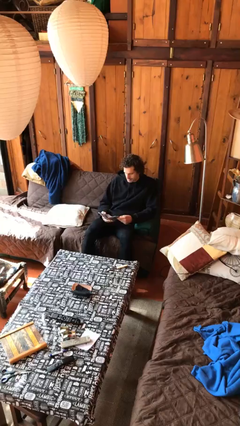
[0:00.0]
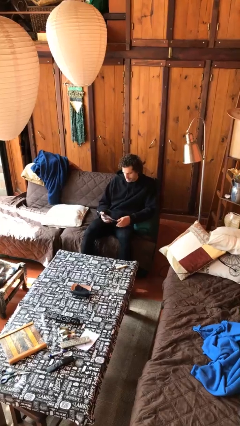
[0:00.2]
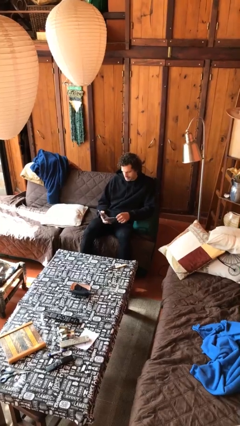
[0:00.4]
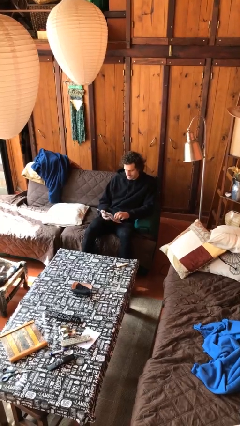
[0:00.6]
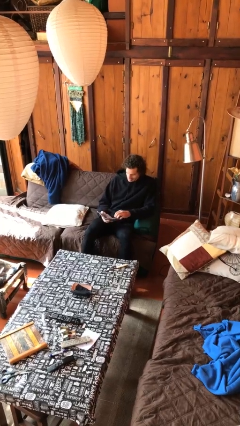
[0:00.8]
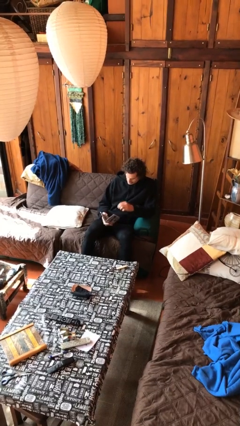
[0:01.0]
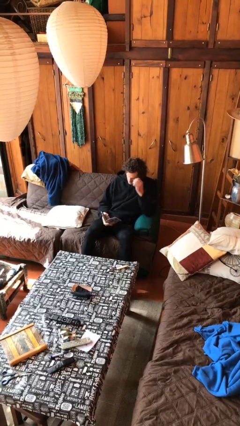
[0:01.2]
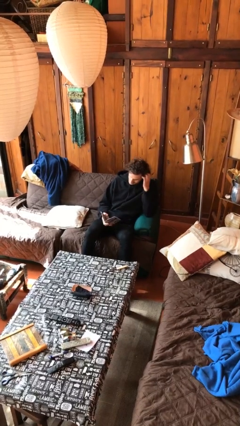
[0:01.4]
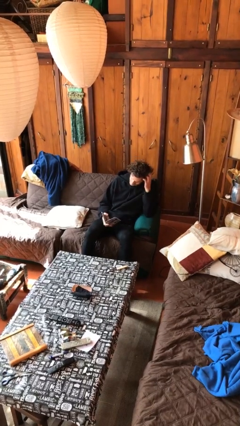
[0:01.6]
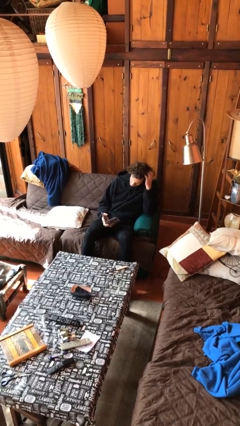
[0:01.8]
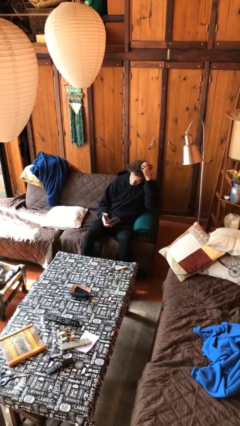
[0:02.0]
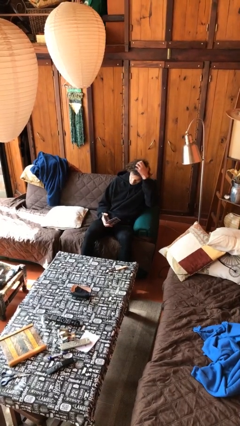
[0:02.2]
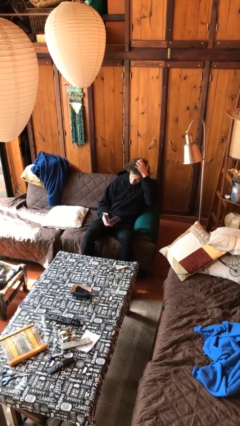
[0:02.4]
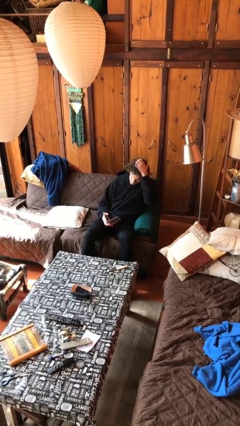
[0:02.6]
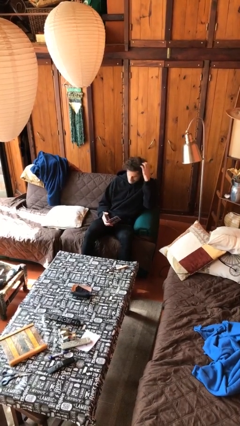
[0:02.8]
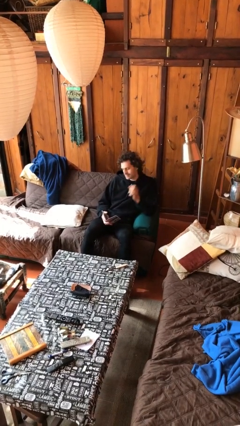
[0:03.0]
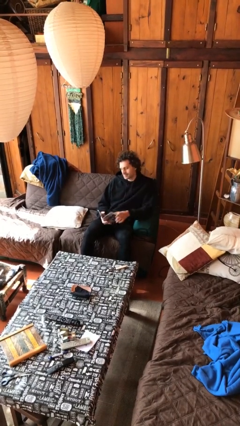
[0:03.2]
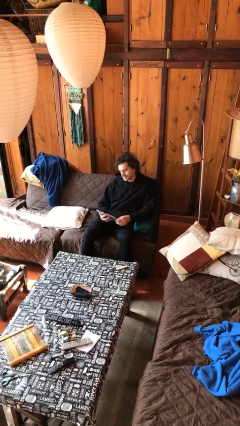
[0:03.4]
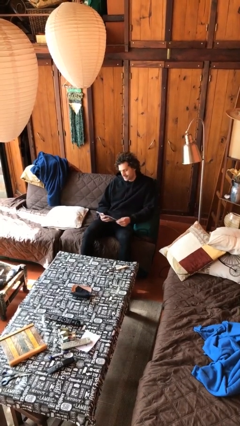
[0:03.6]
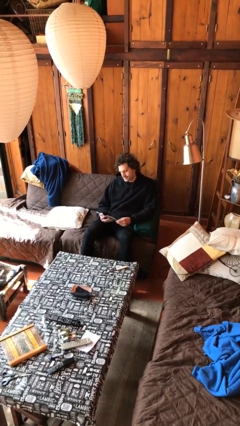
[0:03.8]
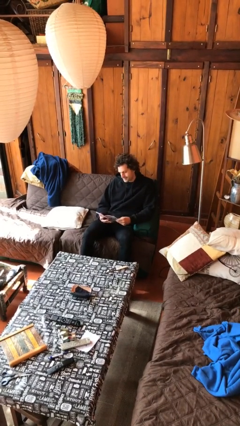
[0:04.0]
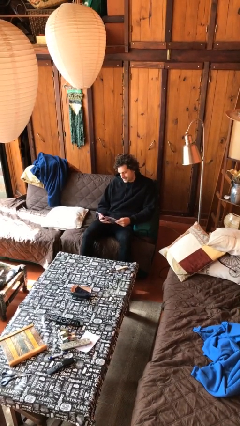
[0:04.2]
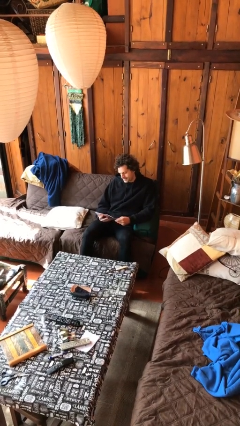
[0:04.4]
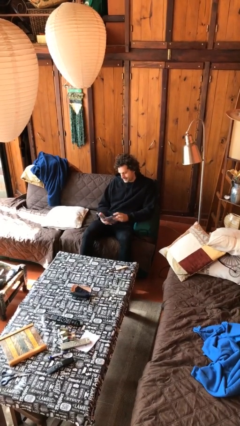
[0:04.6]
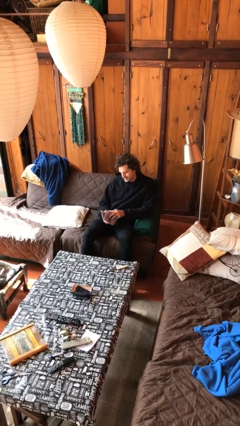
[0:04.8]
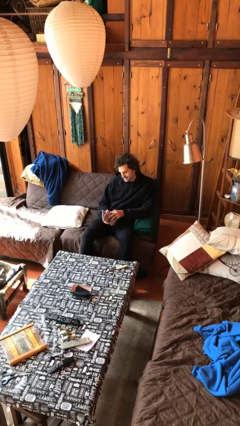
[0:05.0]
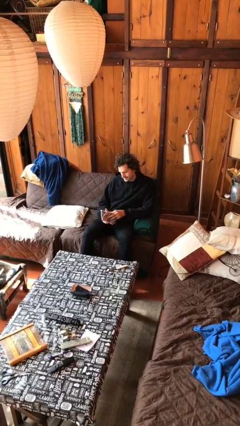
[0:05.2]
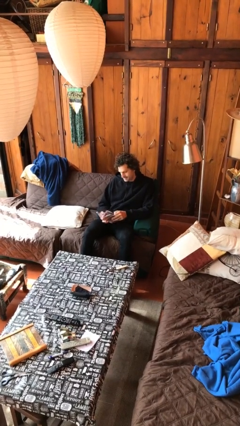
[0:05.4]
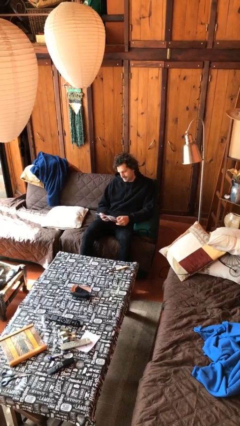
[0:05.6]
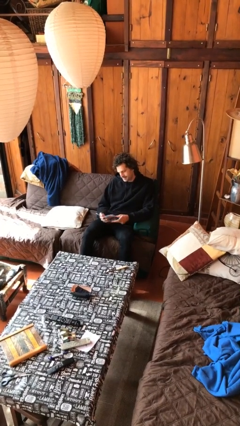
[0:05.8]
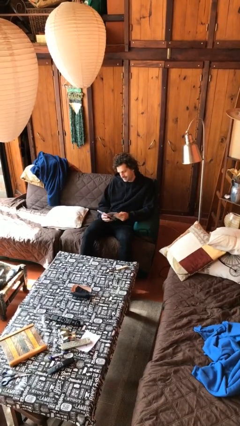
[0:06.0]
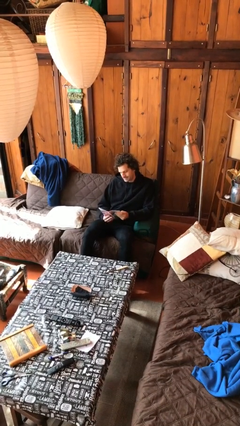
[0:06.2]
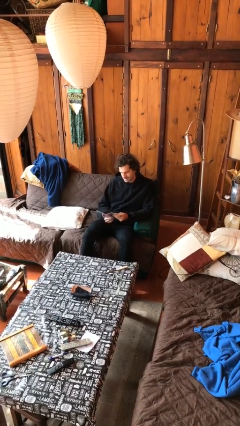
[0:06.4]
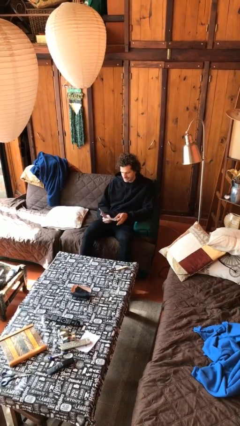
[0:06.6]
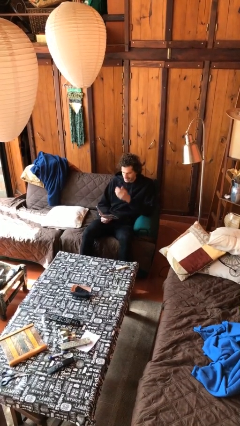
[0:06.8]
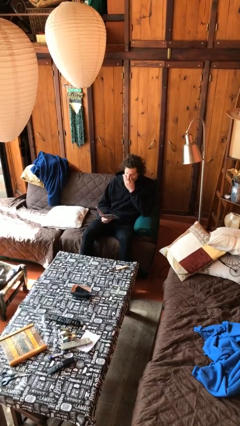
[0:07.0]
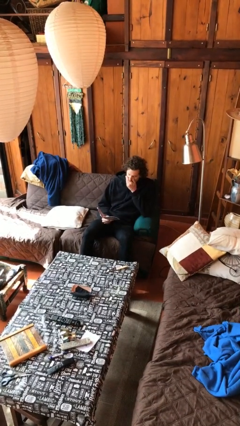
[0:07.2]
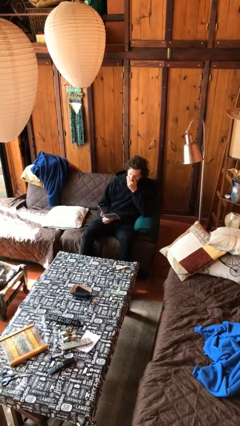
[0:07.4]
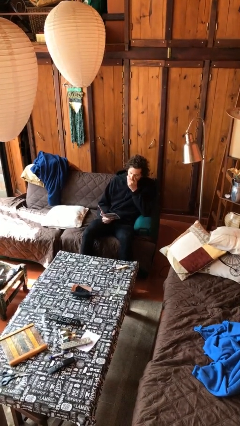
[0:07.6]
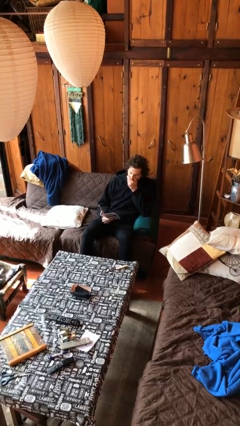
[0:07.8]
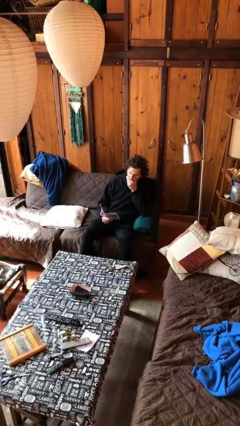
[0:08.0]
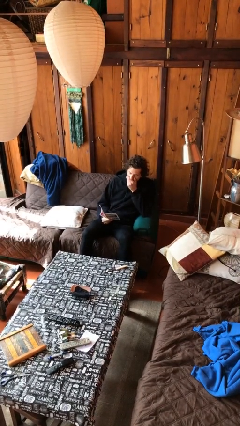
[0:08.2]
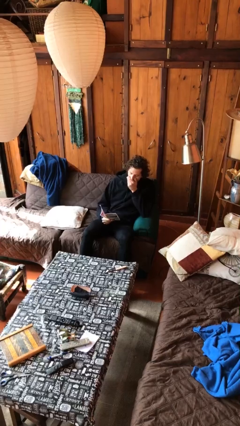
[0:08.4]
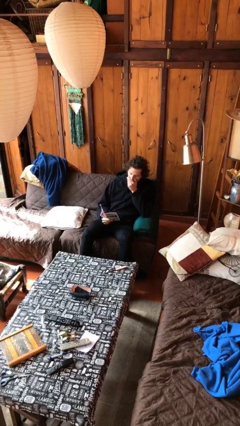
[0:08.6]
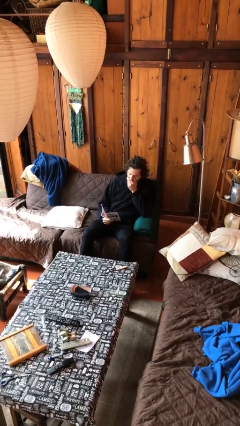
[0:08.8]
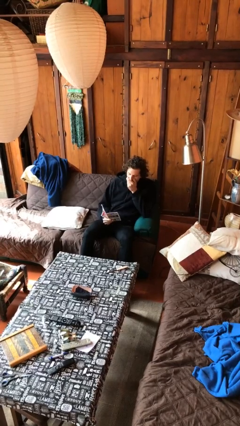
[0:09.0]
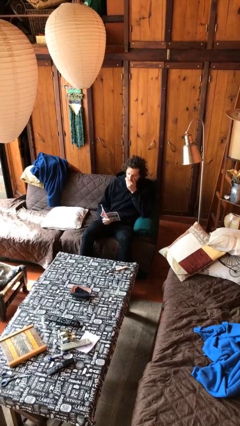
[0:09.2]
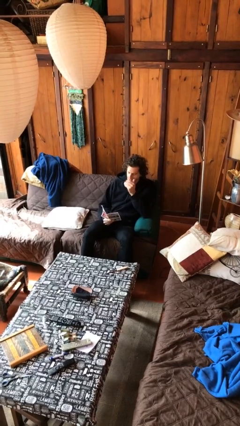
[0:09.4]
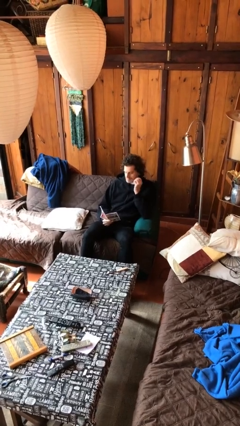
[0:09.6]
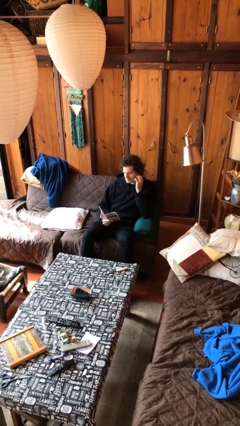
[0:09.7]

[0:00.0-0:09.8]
person reads document

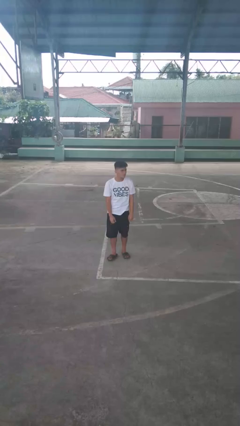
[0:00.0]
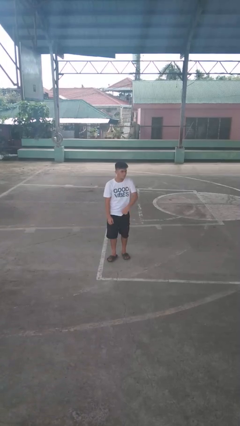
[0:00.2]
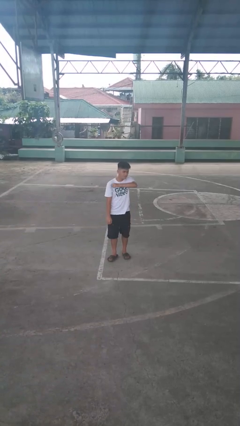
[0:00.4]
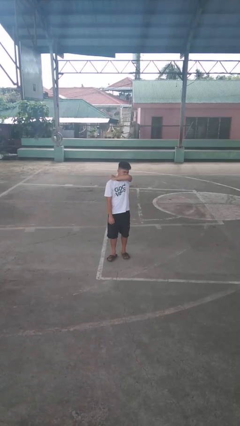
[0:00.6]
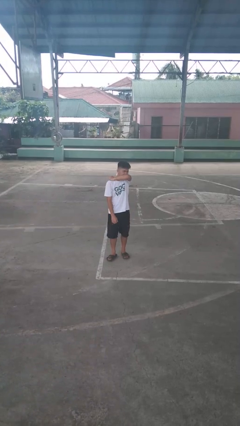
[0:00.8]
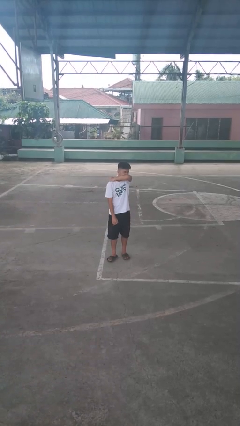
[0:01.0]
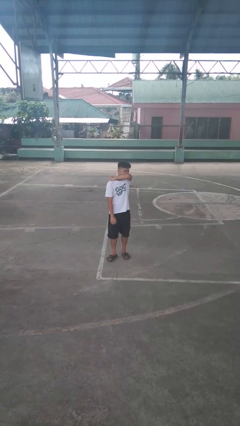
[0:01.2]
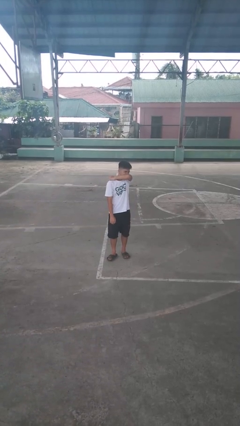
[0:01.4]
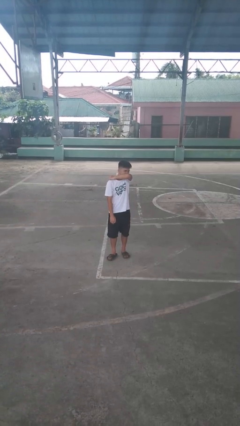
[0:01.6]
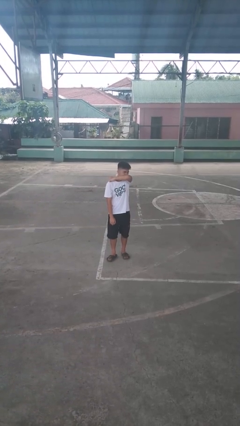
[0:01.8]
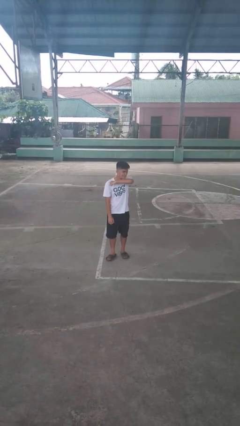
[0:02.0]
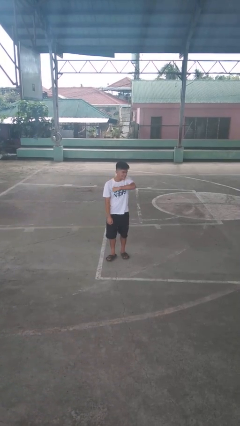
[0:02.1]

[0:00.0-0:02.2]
person sneezes into arm

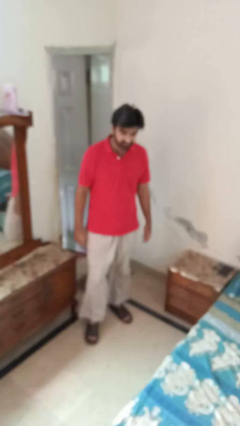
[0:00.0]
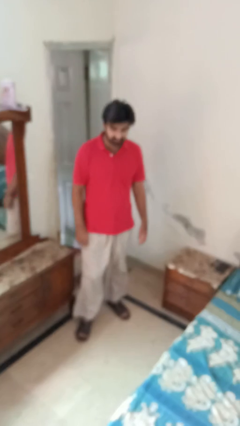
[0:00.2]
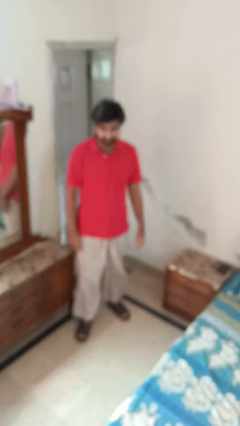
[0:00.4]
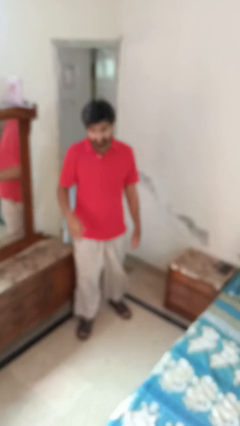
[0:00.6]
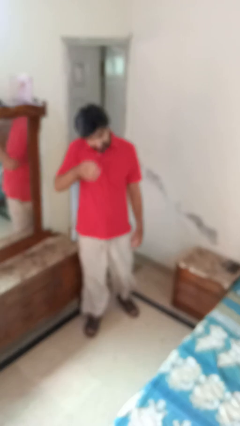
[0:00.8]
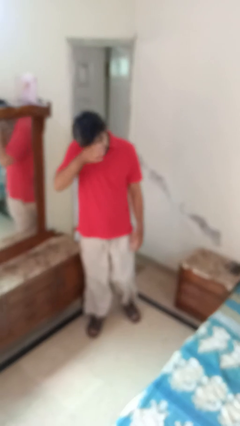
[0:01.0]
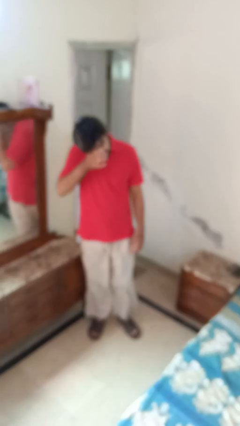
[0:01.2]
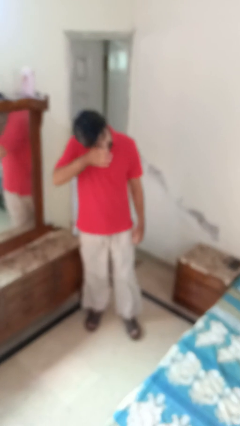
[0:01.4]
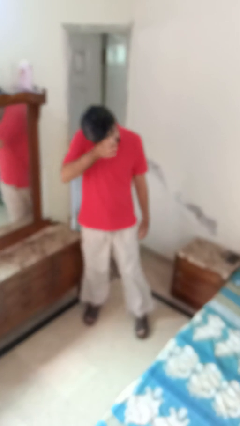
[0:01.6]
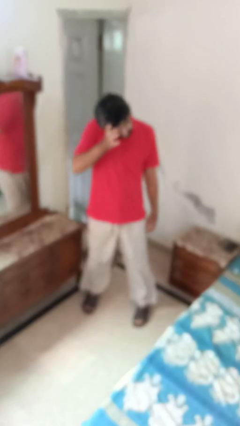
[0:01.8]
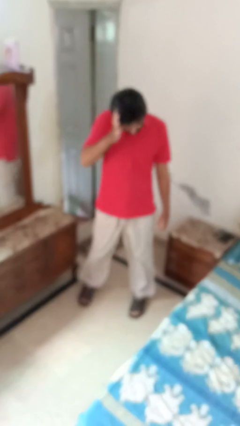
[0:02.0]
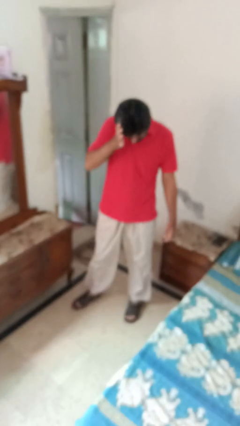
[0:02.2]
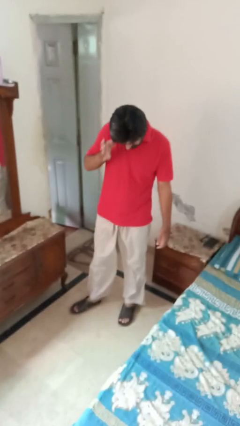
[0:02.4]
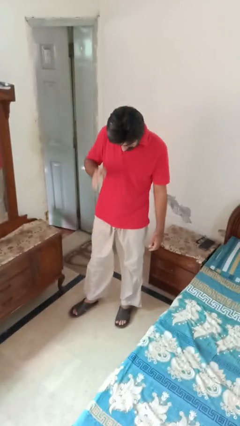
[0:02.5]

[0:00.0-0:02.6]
person rubs eyes

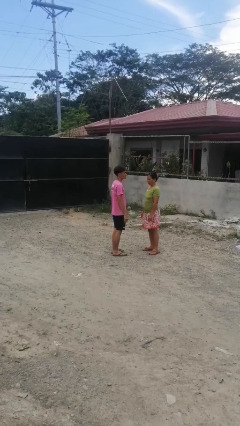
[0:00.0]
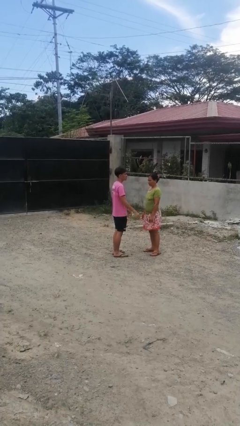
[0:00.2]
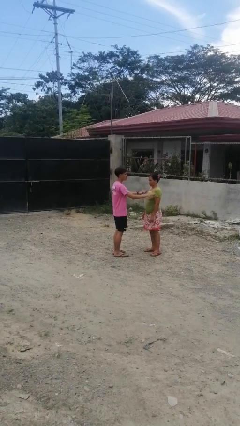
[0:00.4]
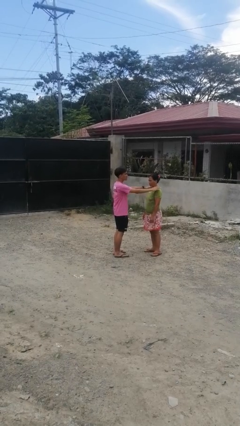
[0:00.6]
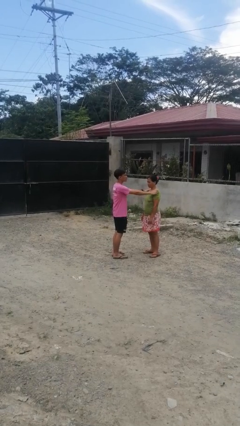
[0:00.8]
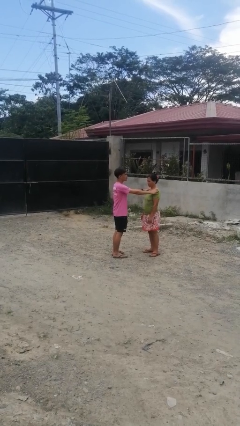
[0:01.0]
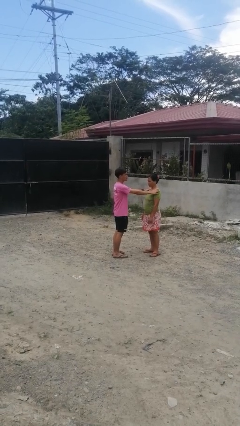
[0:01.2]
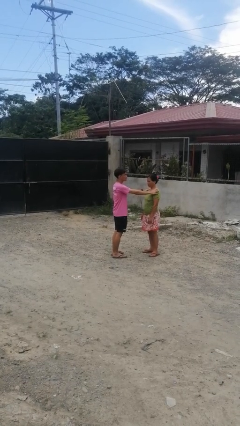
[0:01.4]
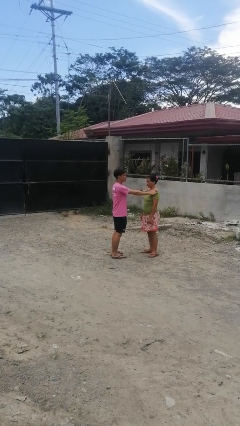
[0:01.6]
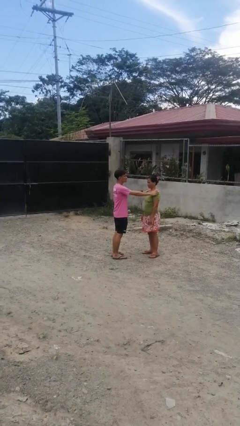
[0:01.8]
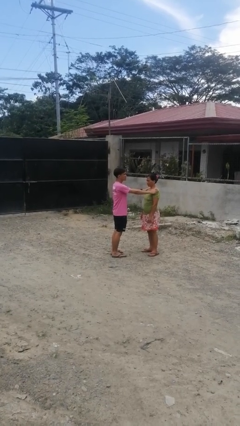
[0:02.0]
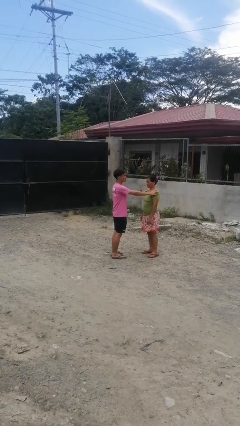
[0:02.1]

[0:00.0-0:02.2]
person grabs person by shoulder

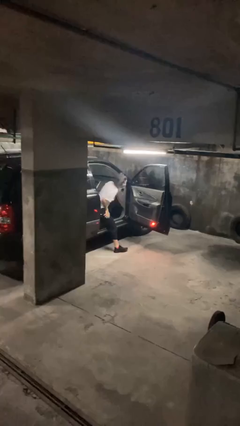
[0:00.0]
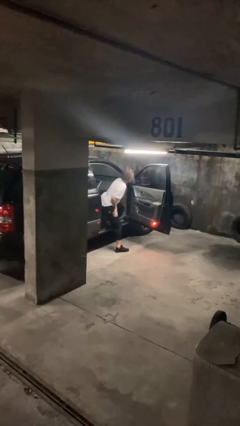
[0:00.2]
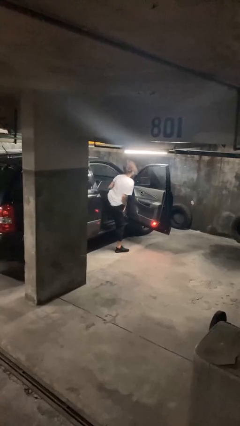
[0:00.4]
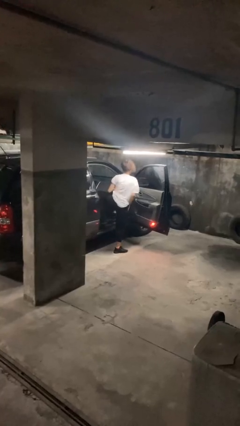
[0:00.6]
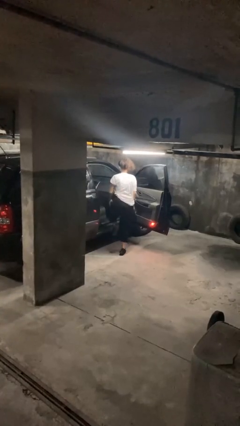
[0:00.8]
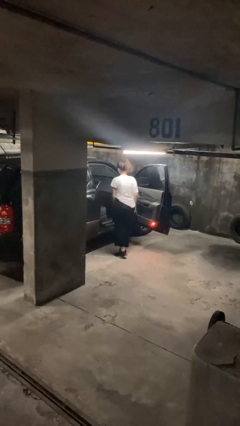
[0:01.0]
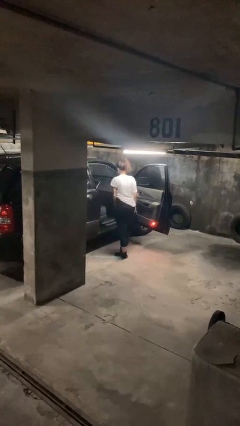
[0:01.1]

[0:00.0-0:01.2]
person exits car
